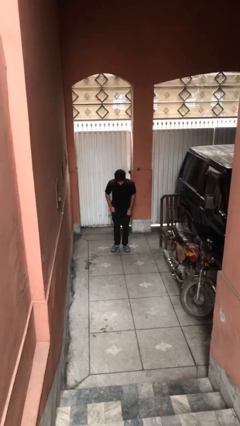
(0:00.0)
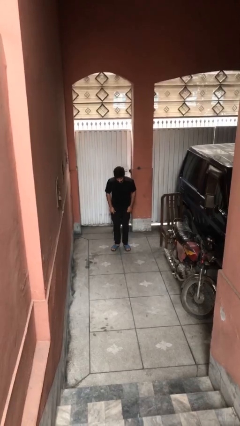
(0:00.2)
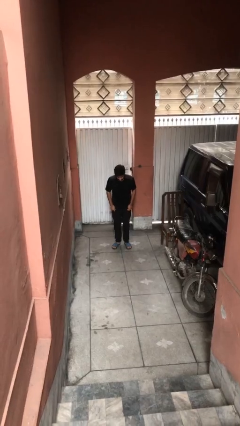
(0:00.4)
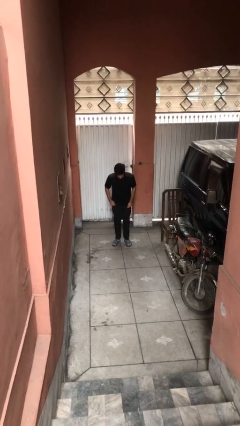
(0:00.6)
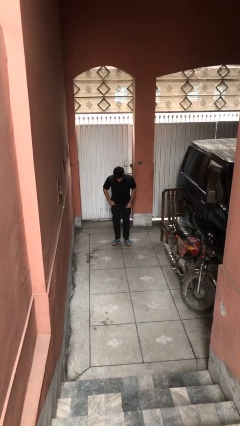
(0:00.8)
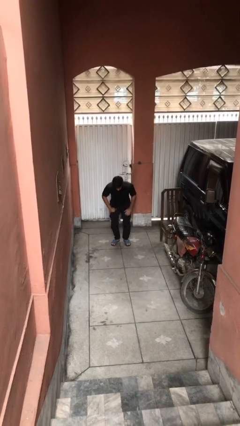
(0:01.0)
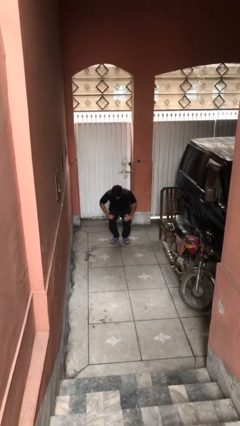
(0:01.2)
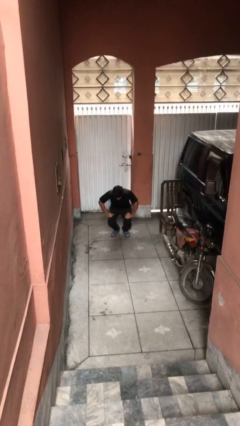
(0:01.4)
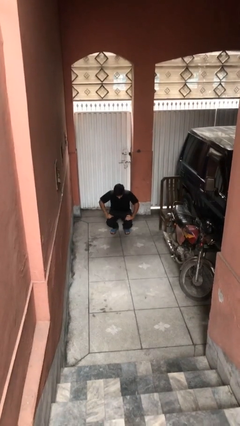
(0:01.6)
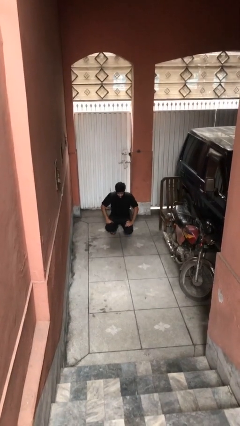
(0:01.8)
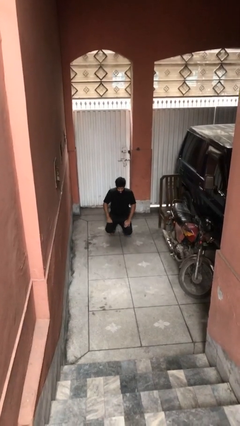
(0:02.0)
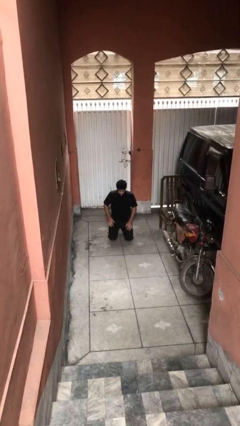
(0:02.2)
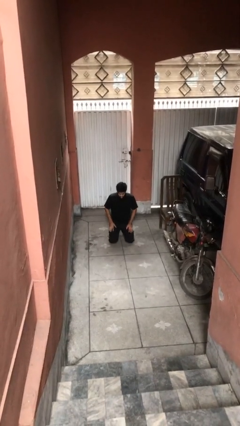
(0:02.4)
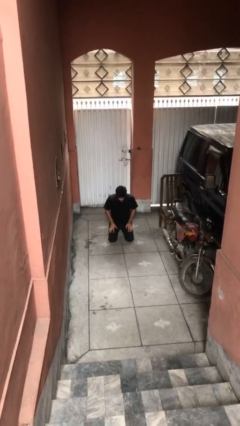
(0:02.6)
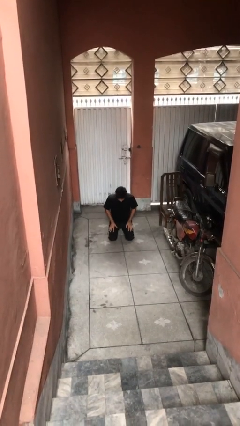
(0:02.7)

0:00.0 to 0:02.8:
person sits down

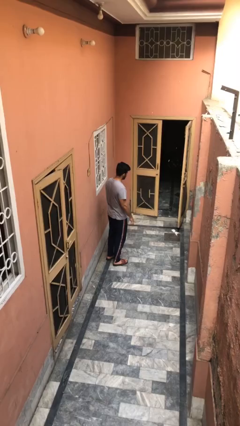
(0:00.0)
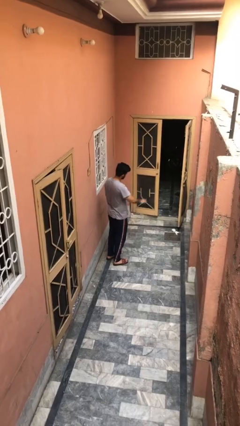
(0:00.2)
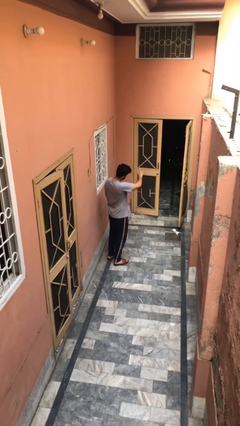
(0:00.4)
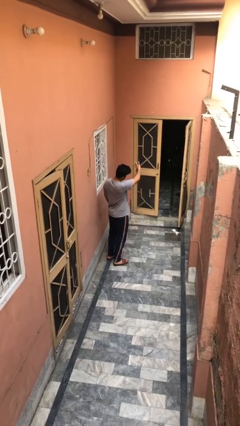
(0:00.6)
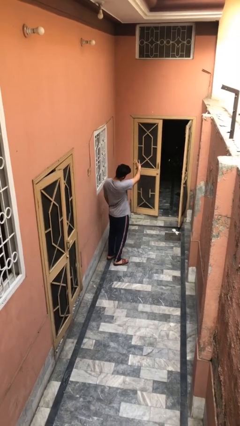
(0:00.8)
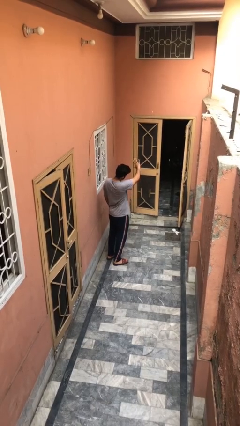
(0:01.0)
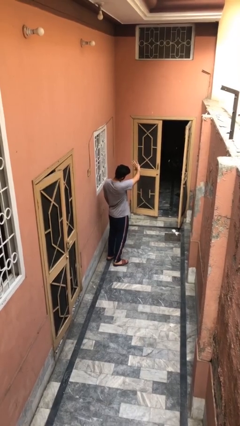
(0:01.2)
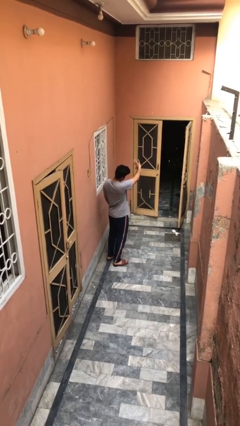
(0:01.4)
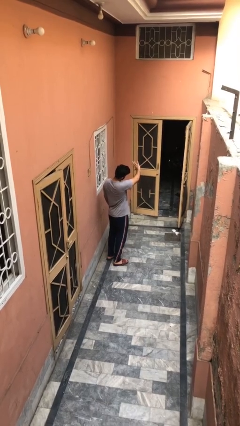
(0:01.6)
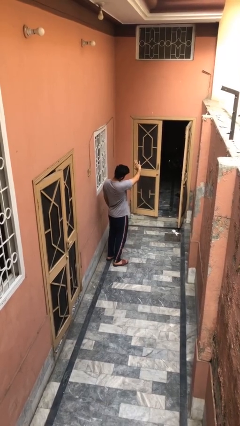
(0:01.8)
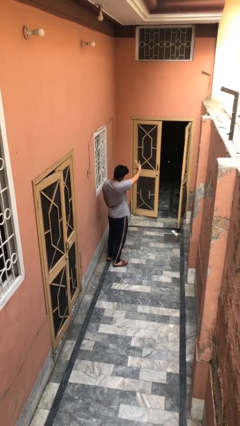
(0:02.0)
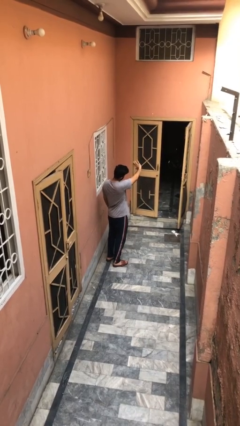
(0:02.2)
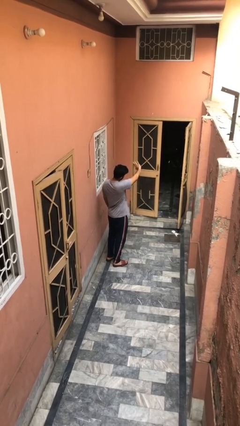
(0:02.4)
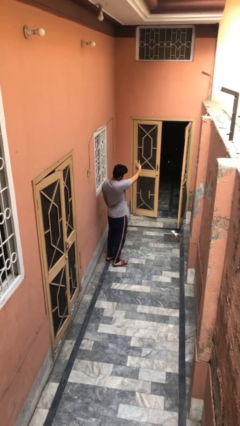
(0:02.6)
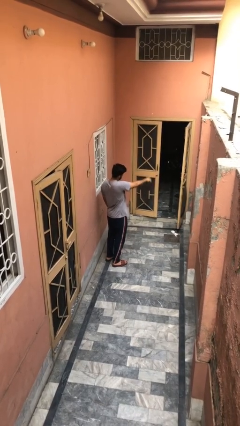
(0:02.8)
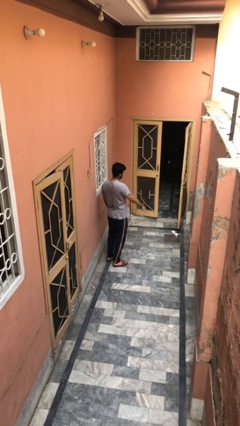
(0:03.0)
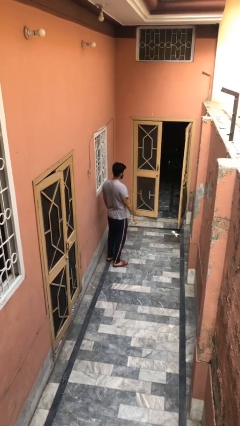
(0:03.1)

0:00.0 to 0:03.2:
person waves at person

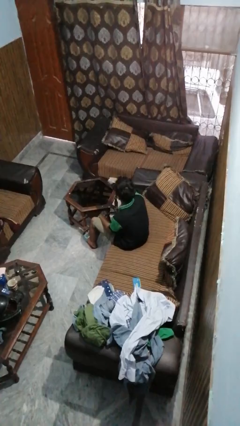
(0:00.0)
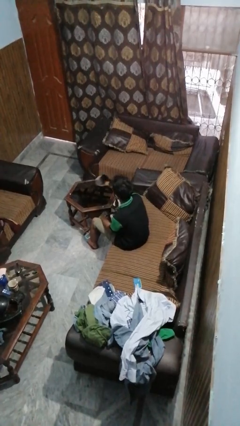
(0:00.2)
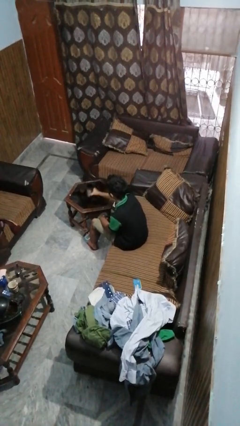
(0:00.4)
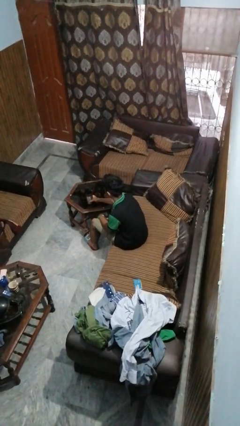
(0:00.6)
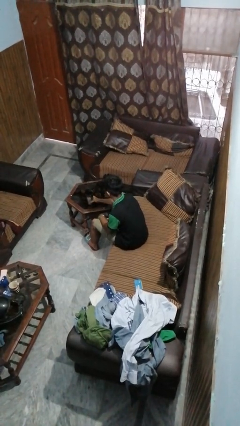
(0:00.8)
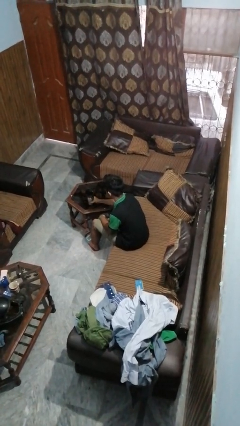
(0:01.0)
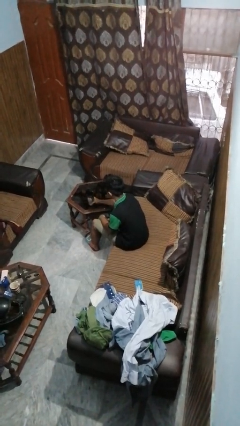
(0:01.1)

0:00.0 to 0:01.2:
person puts down object on table

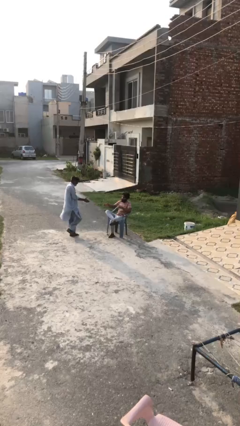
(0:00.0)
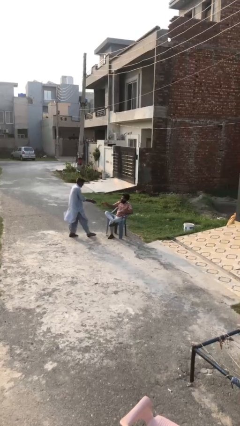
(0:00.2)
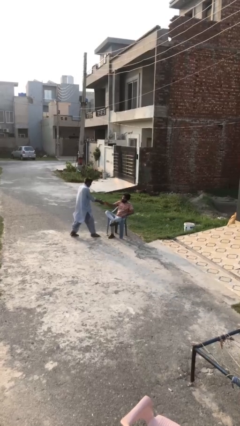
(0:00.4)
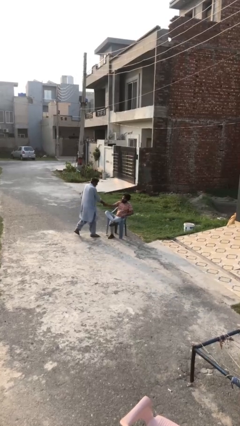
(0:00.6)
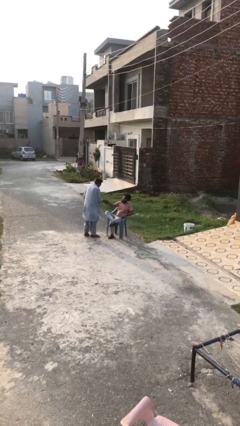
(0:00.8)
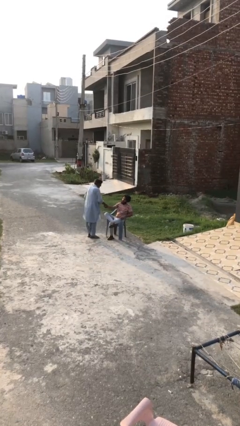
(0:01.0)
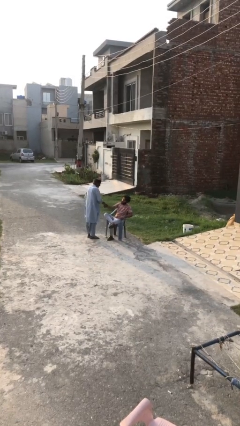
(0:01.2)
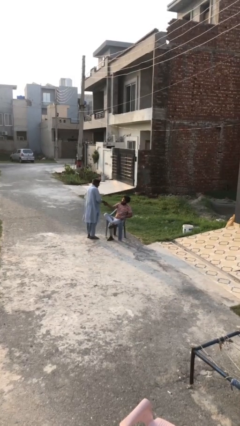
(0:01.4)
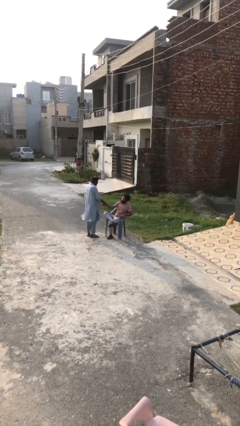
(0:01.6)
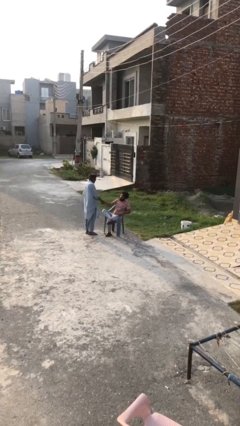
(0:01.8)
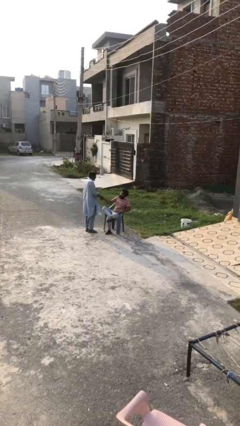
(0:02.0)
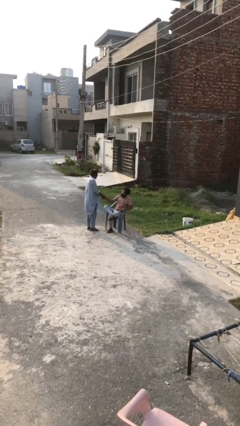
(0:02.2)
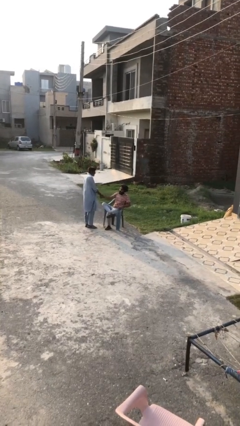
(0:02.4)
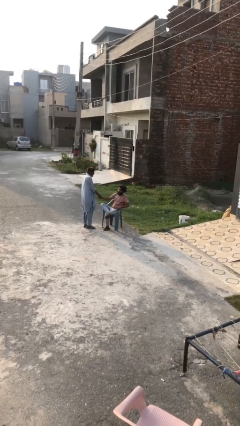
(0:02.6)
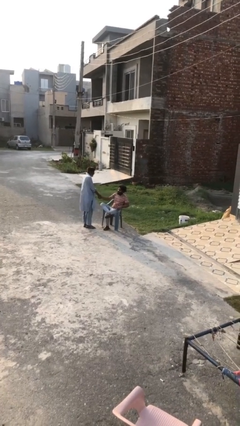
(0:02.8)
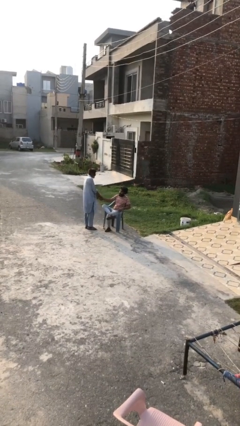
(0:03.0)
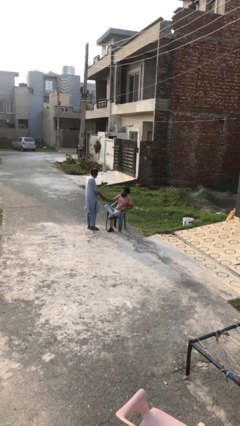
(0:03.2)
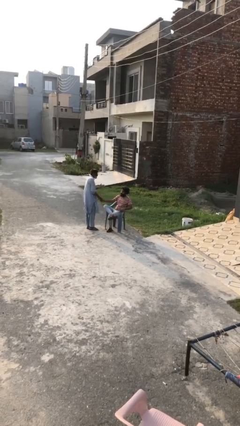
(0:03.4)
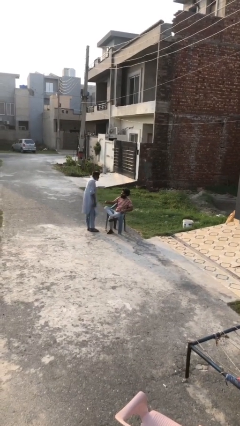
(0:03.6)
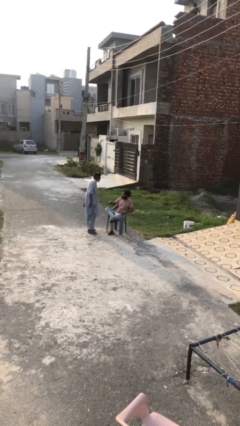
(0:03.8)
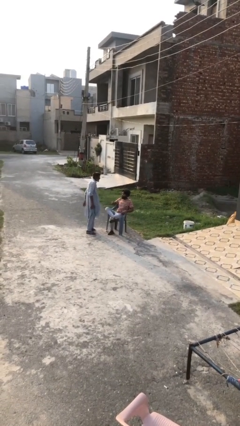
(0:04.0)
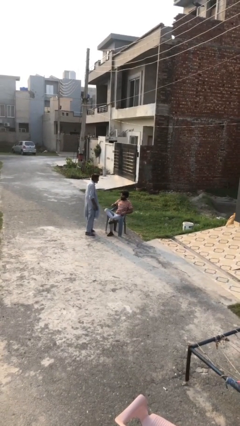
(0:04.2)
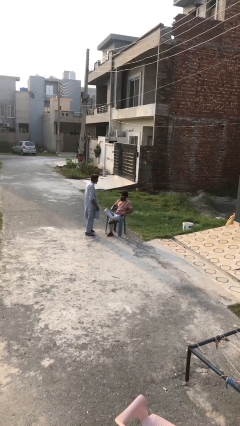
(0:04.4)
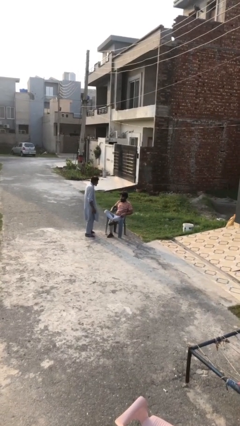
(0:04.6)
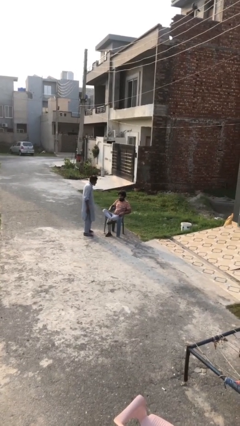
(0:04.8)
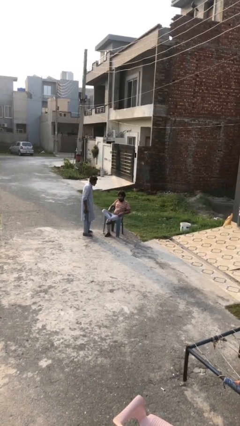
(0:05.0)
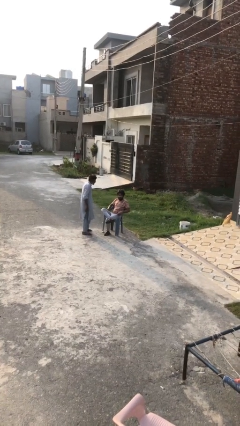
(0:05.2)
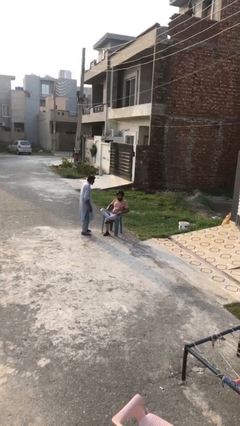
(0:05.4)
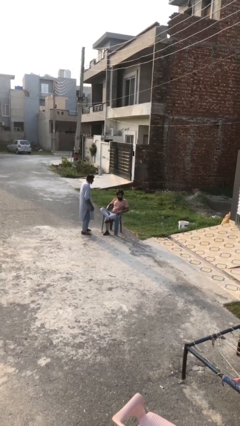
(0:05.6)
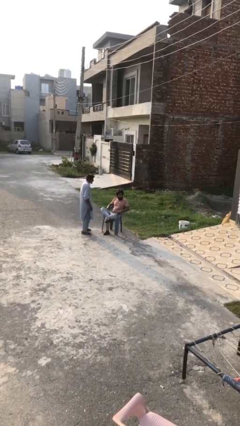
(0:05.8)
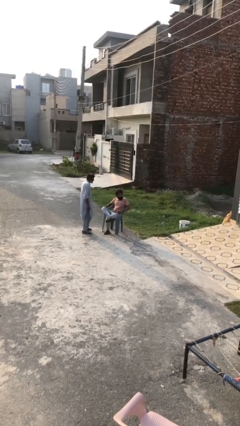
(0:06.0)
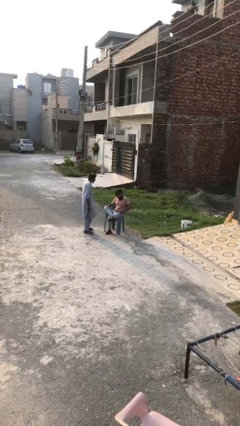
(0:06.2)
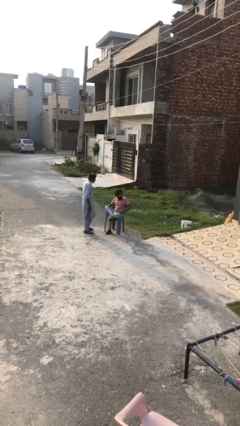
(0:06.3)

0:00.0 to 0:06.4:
person shakes hand

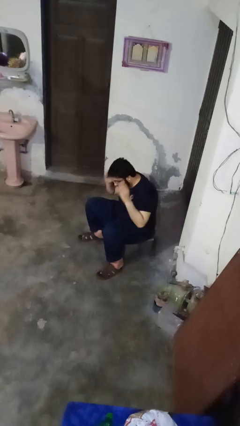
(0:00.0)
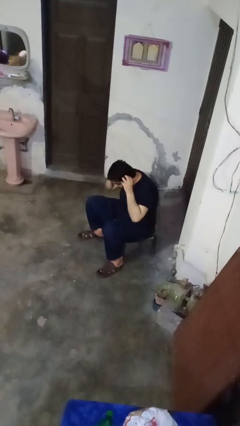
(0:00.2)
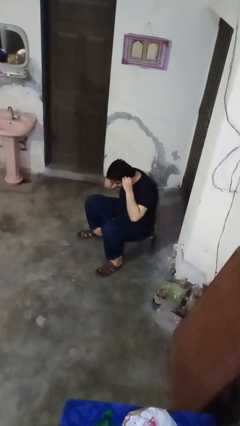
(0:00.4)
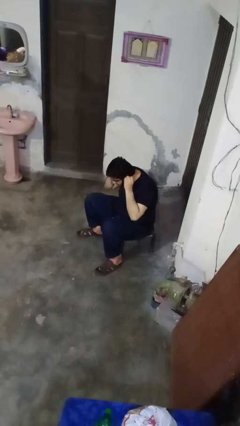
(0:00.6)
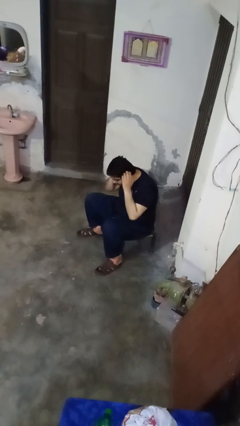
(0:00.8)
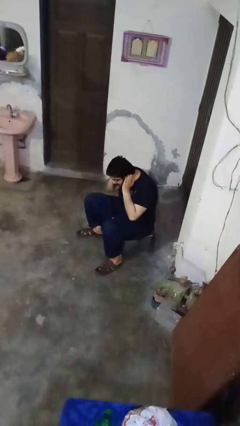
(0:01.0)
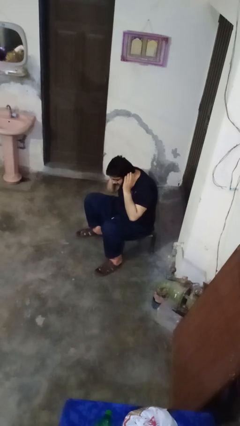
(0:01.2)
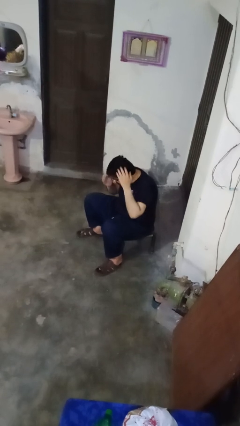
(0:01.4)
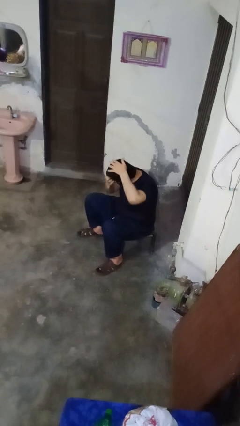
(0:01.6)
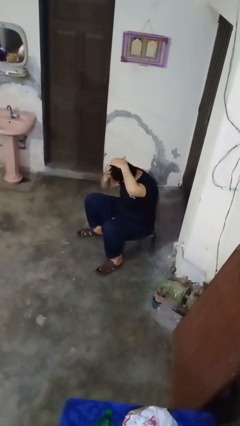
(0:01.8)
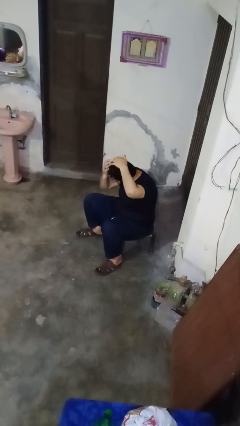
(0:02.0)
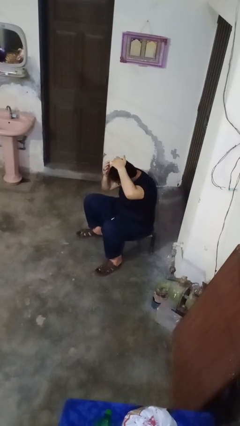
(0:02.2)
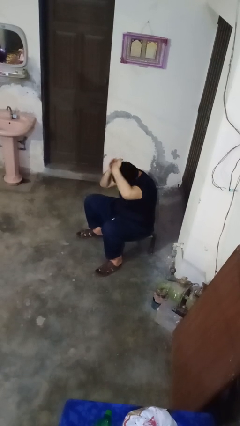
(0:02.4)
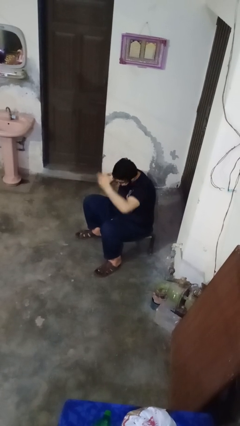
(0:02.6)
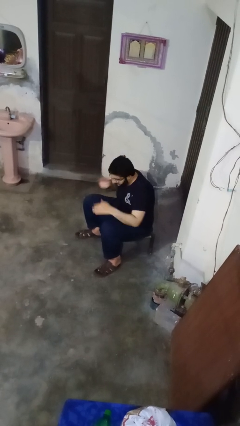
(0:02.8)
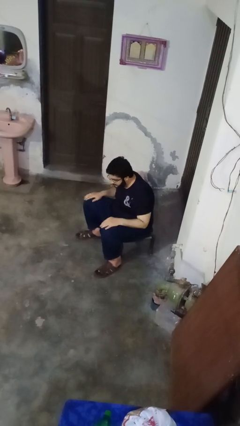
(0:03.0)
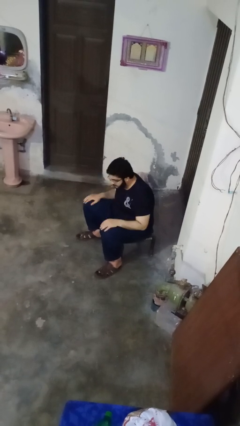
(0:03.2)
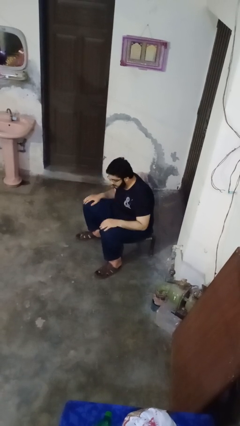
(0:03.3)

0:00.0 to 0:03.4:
person strokes hair

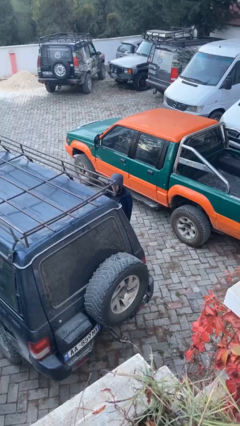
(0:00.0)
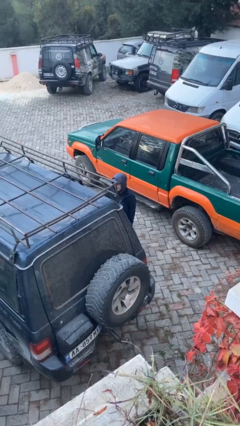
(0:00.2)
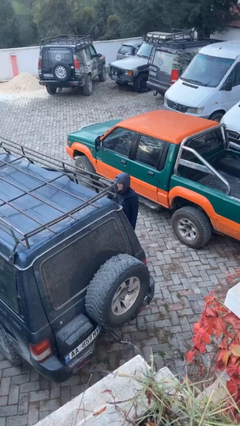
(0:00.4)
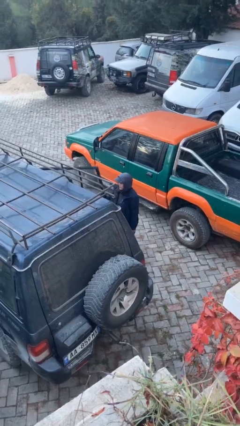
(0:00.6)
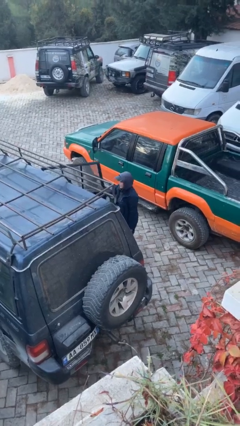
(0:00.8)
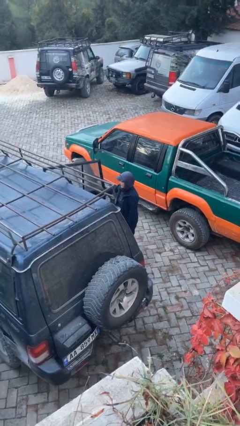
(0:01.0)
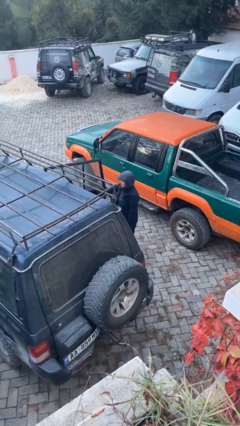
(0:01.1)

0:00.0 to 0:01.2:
person opens car door
